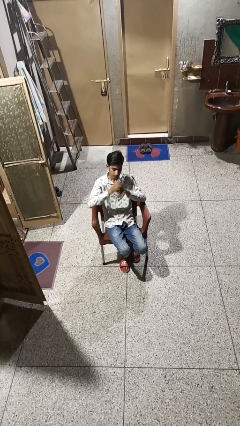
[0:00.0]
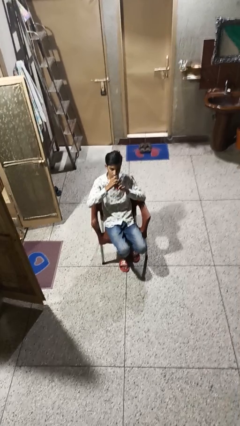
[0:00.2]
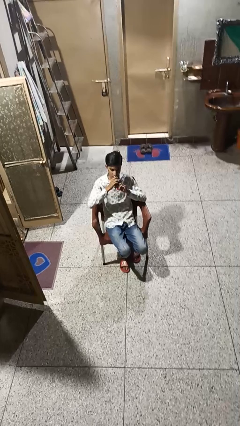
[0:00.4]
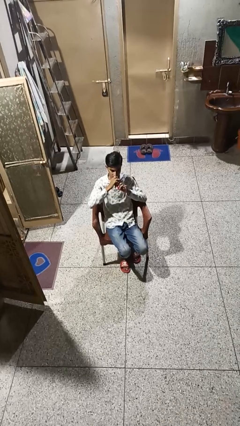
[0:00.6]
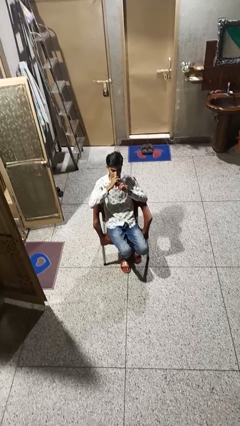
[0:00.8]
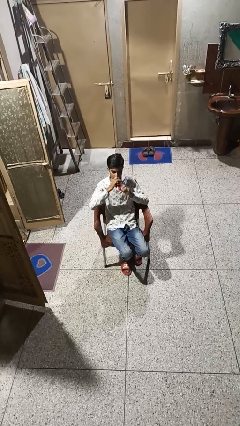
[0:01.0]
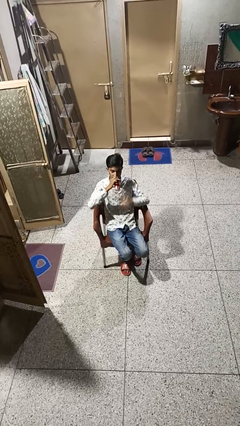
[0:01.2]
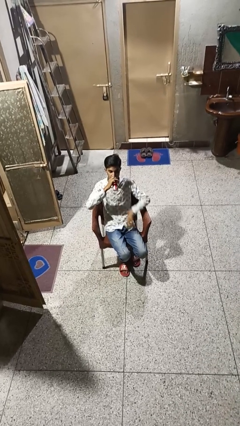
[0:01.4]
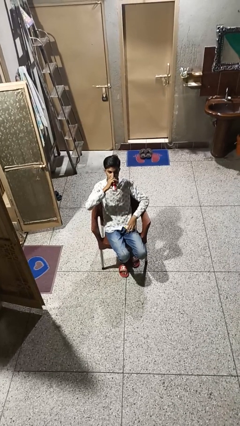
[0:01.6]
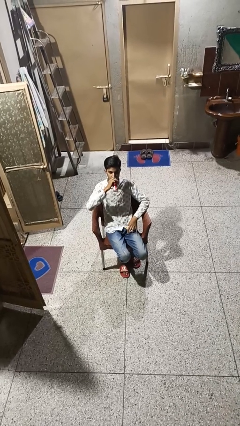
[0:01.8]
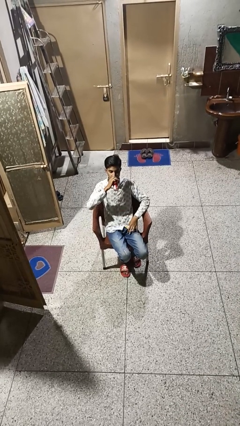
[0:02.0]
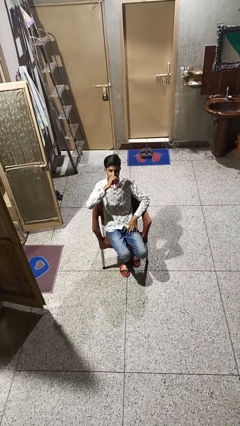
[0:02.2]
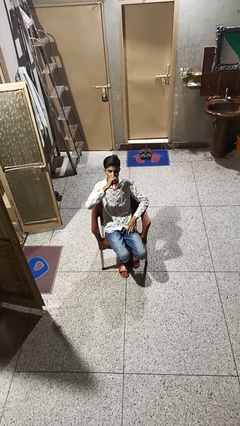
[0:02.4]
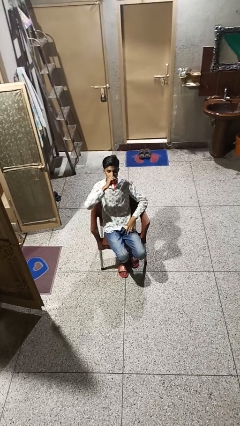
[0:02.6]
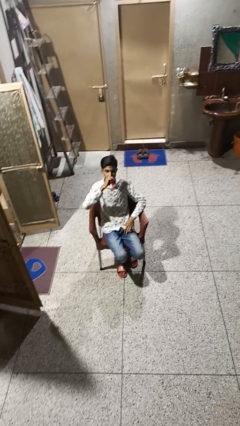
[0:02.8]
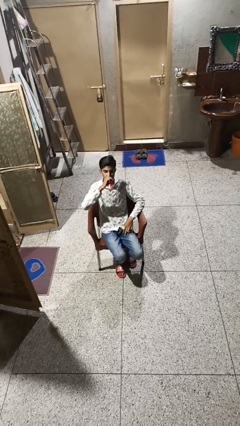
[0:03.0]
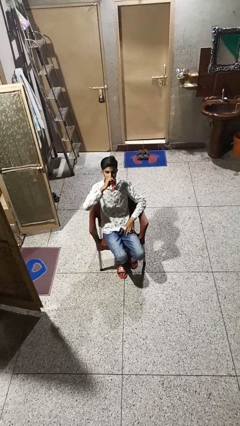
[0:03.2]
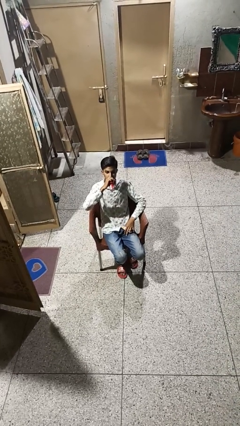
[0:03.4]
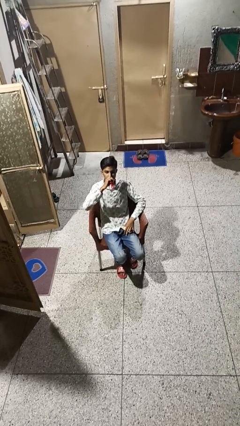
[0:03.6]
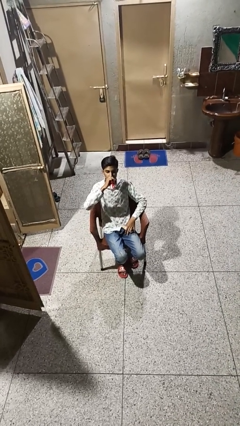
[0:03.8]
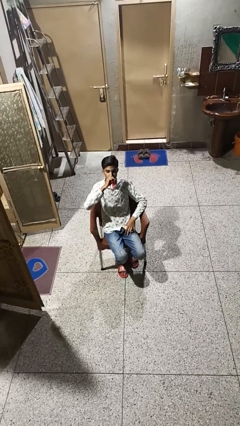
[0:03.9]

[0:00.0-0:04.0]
person drinks from beverage can

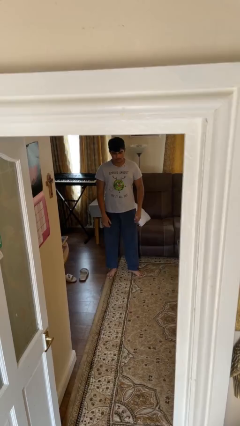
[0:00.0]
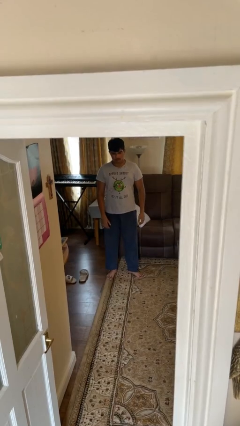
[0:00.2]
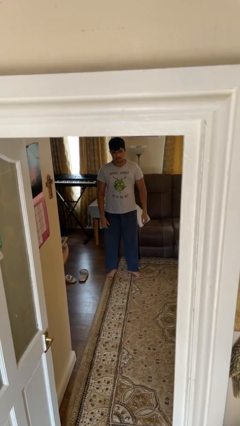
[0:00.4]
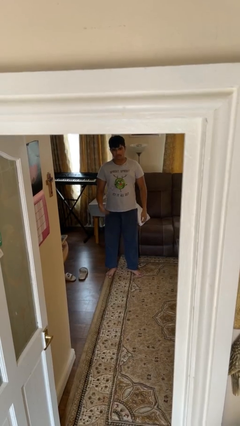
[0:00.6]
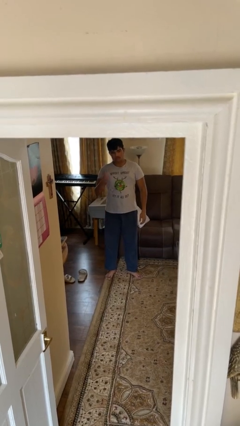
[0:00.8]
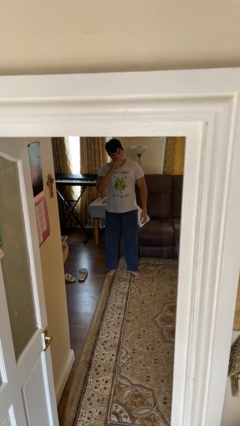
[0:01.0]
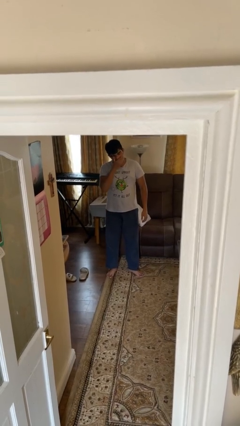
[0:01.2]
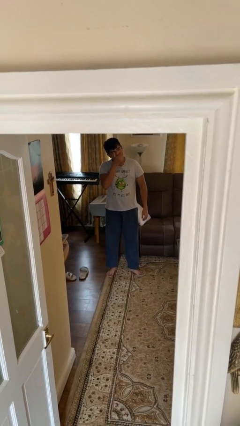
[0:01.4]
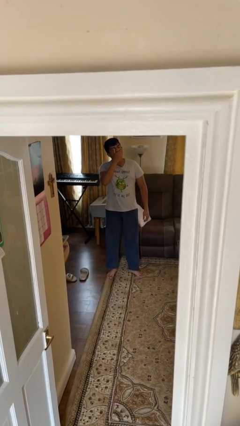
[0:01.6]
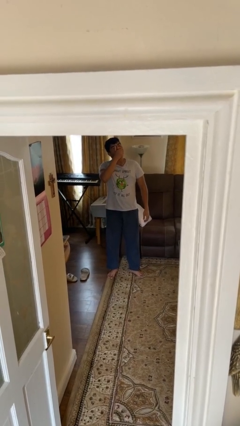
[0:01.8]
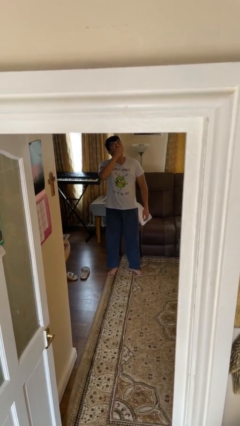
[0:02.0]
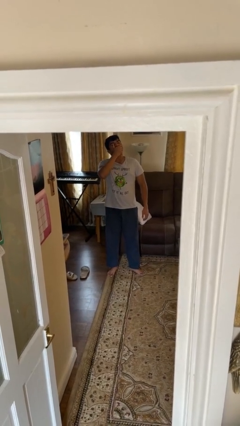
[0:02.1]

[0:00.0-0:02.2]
person yawns

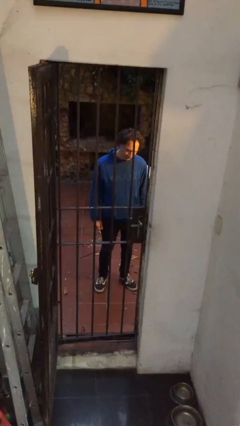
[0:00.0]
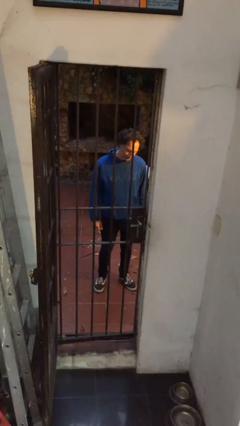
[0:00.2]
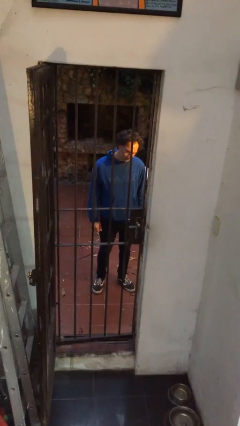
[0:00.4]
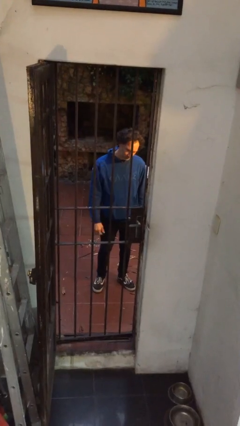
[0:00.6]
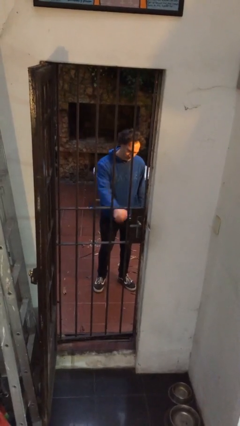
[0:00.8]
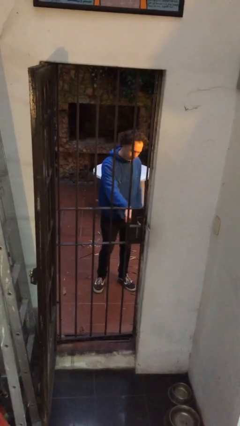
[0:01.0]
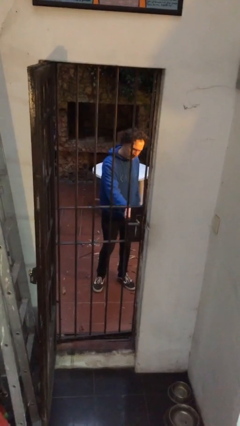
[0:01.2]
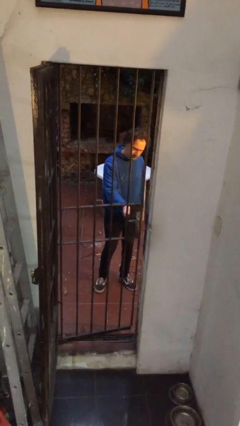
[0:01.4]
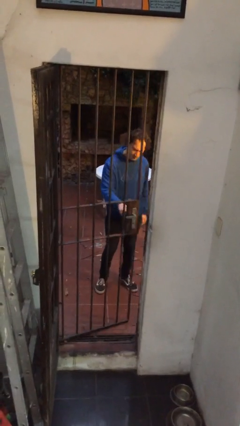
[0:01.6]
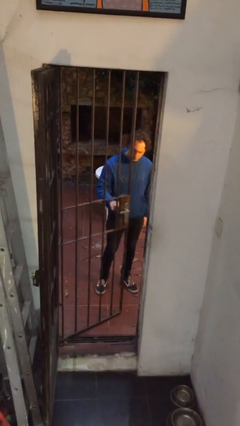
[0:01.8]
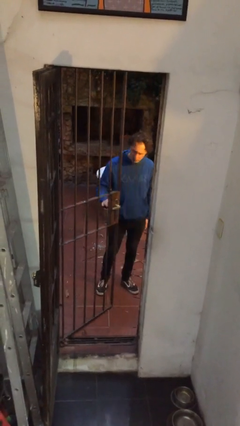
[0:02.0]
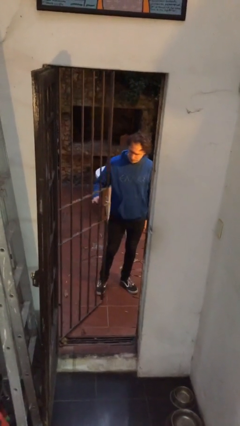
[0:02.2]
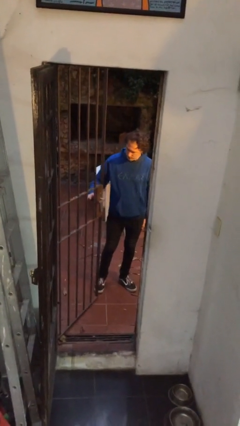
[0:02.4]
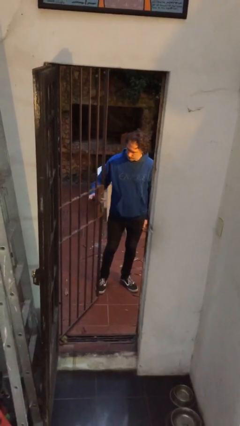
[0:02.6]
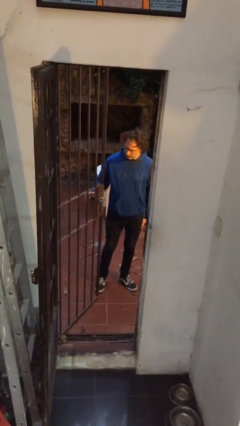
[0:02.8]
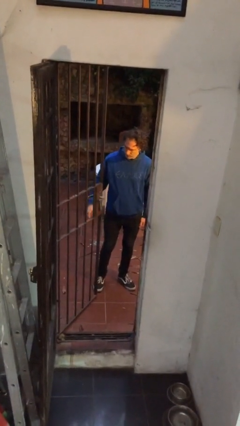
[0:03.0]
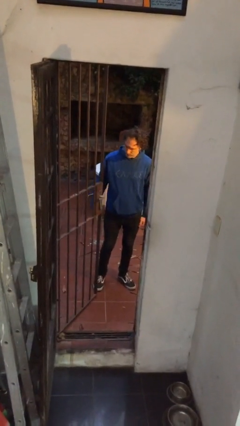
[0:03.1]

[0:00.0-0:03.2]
person opens gate

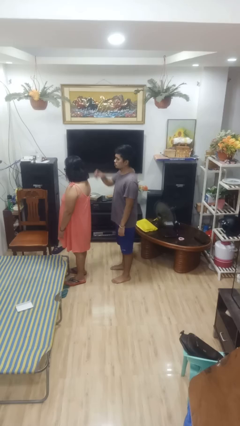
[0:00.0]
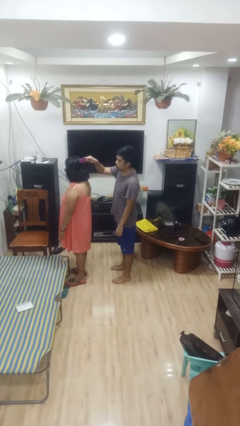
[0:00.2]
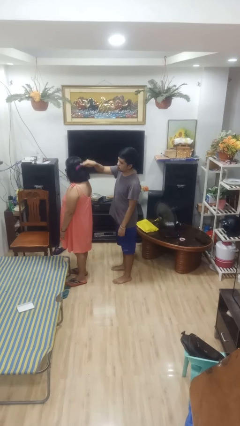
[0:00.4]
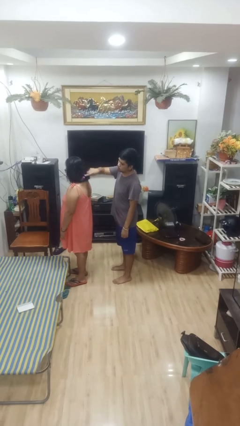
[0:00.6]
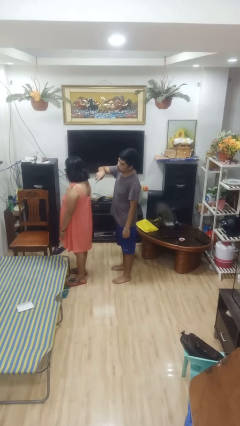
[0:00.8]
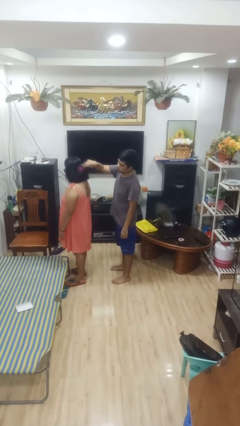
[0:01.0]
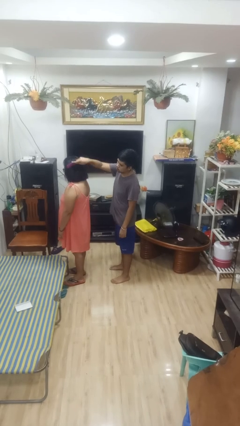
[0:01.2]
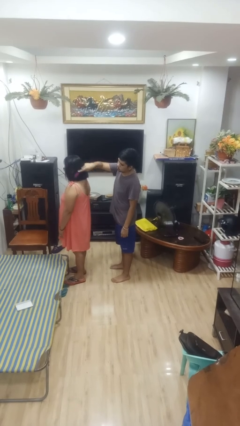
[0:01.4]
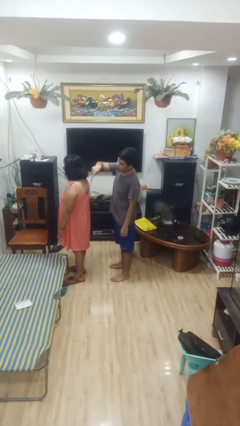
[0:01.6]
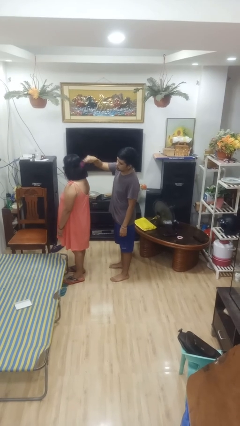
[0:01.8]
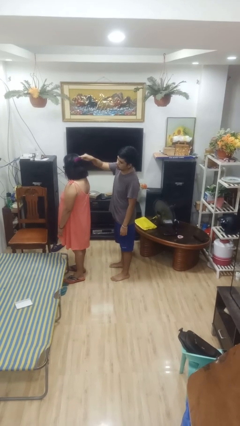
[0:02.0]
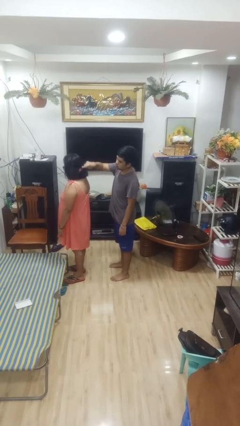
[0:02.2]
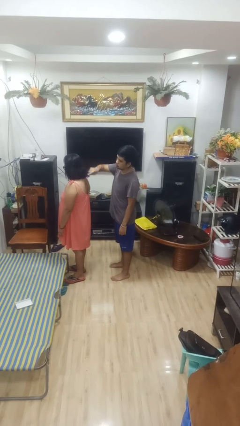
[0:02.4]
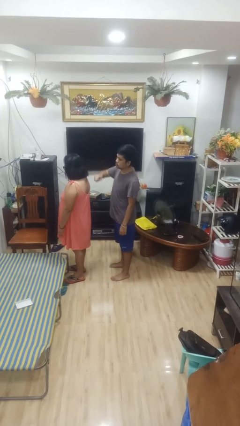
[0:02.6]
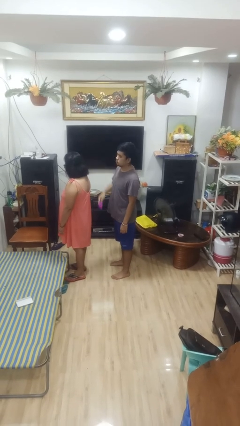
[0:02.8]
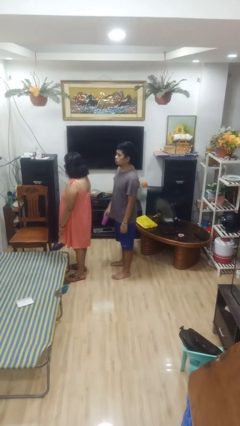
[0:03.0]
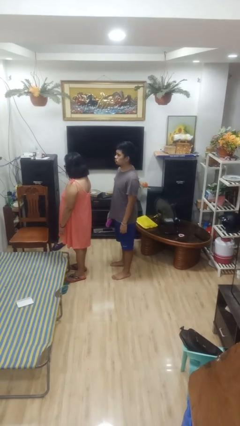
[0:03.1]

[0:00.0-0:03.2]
person brushes hair of person

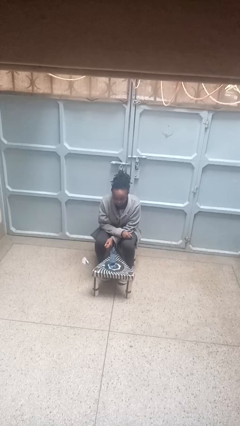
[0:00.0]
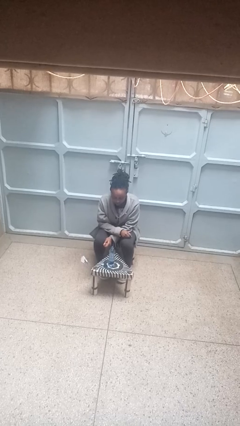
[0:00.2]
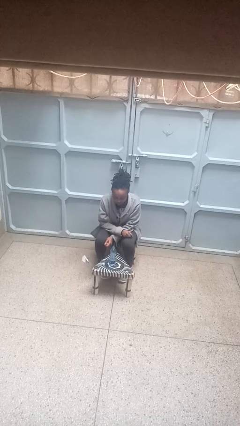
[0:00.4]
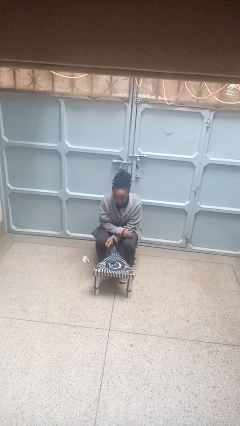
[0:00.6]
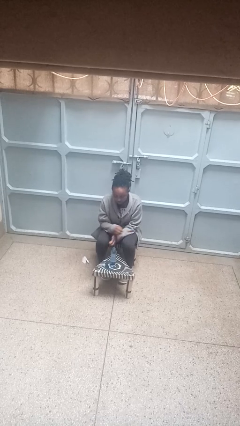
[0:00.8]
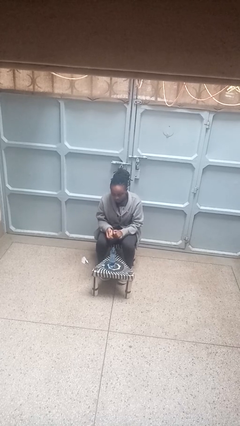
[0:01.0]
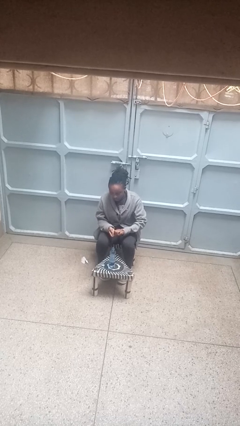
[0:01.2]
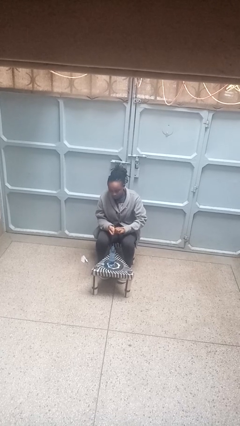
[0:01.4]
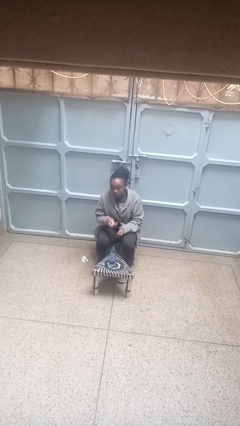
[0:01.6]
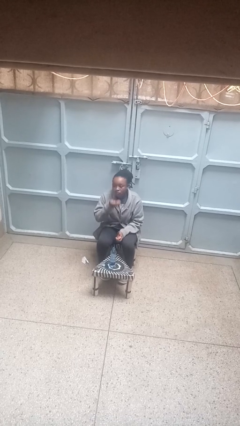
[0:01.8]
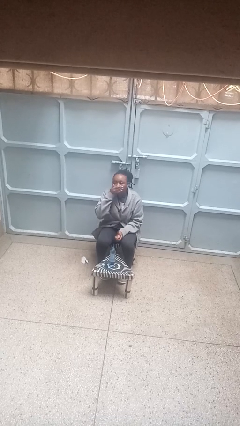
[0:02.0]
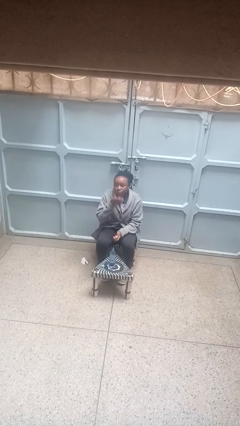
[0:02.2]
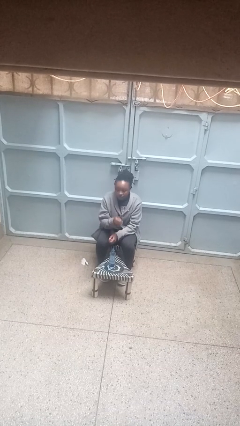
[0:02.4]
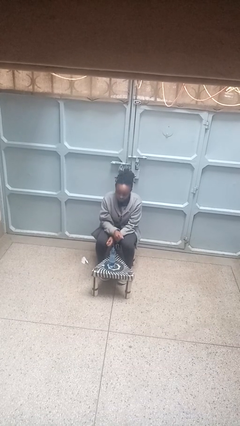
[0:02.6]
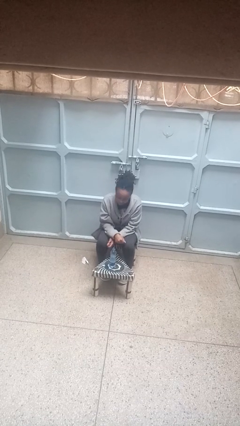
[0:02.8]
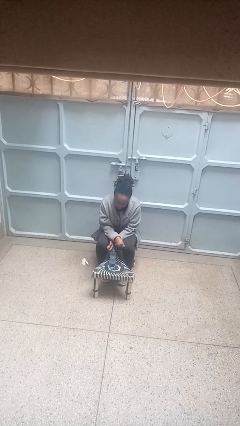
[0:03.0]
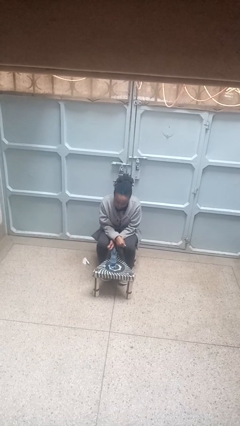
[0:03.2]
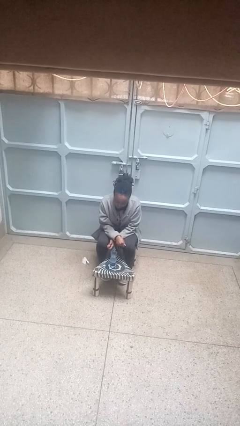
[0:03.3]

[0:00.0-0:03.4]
person takes medicine pills

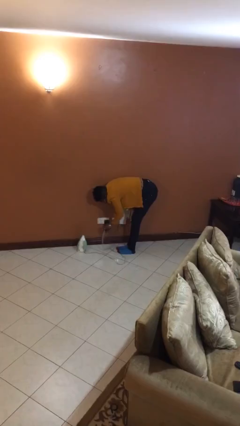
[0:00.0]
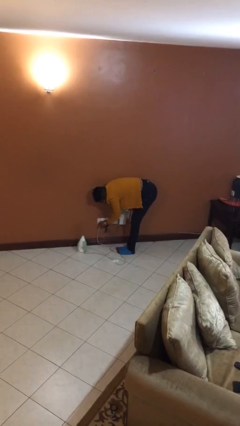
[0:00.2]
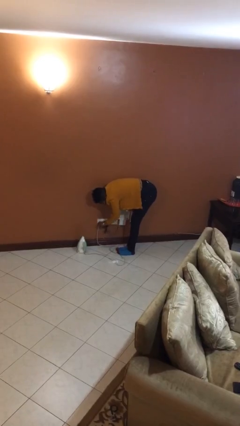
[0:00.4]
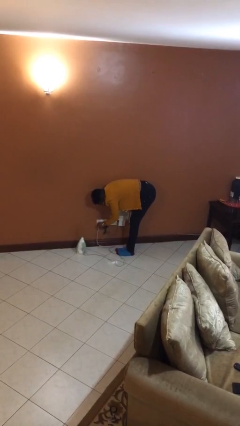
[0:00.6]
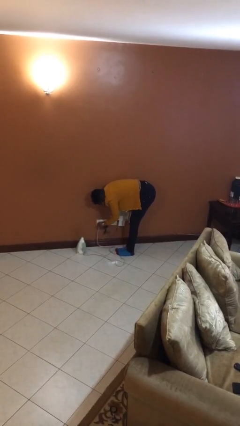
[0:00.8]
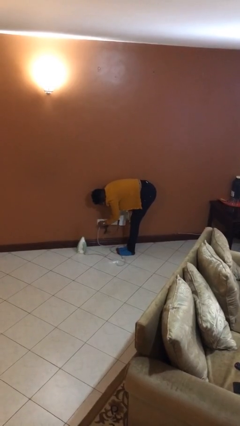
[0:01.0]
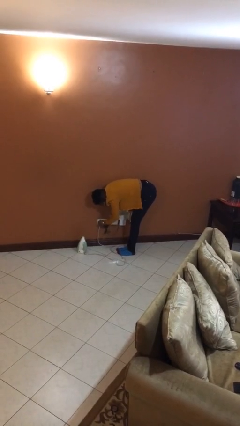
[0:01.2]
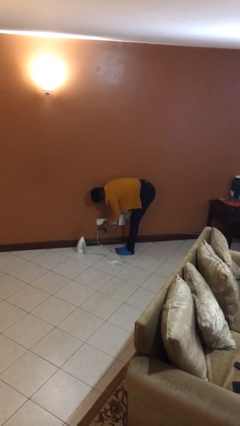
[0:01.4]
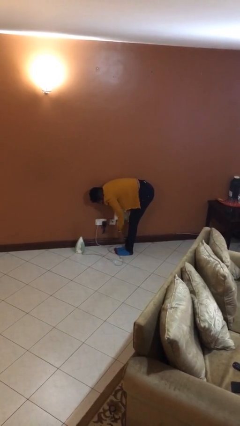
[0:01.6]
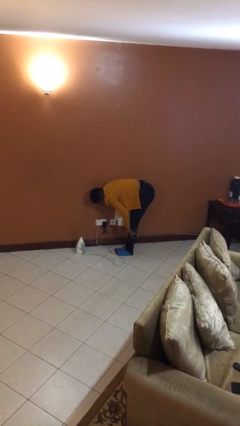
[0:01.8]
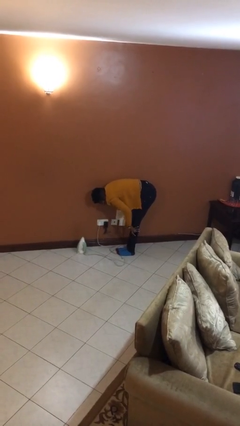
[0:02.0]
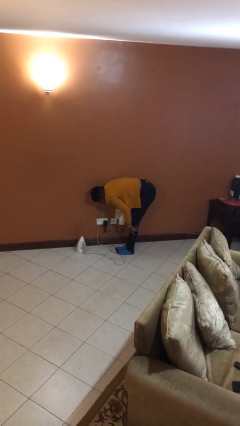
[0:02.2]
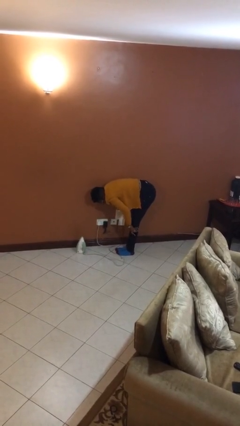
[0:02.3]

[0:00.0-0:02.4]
person plugs into electrical socket
